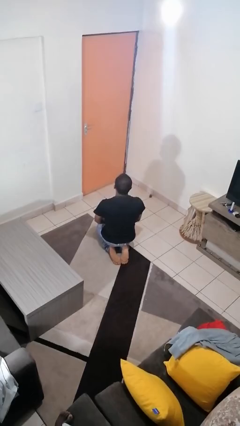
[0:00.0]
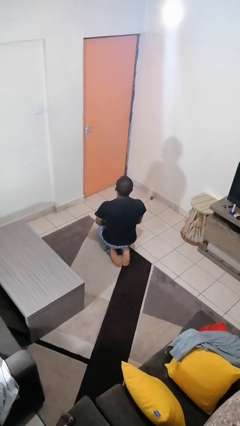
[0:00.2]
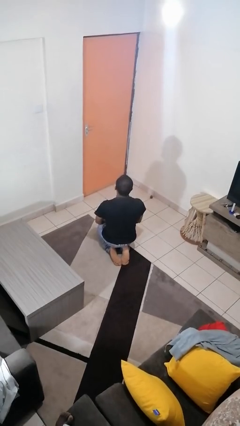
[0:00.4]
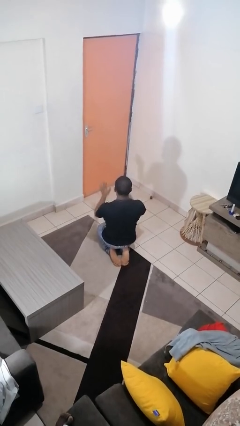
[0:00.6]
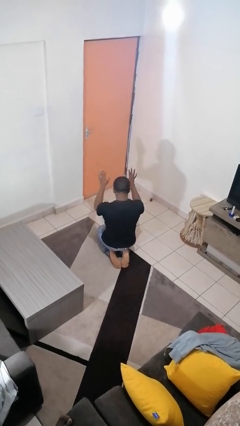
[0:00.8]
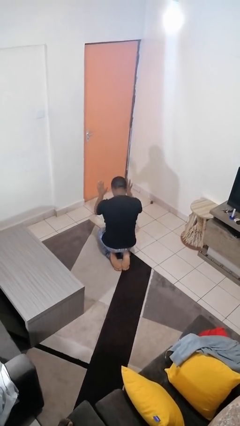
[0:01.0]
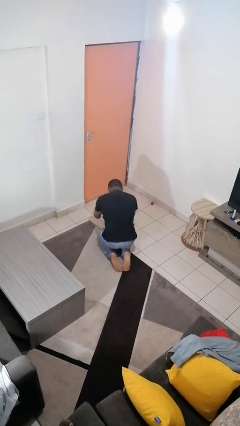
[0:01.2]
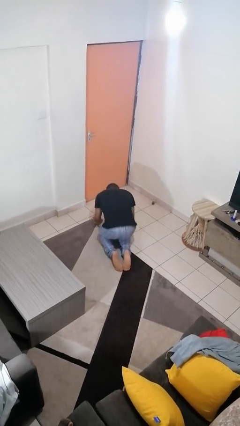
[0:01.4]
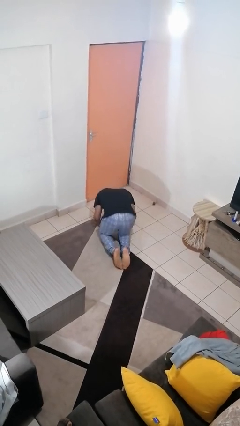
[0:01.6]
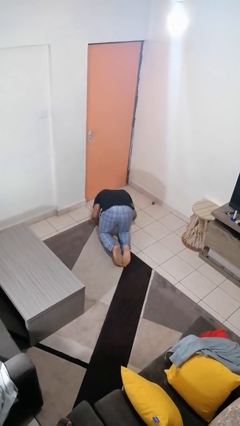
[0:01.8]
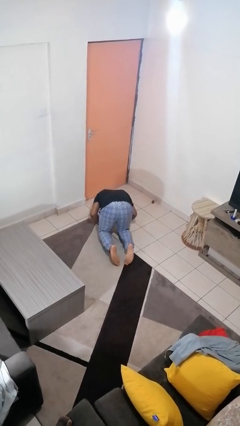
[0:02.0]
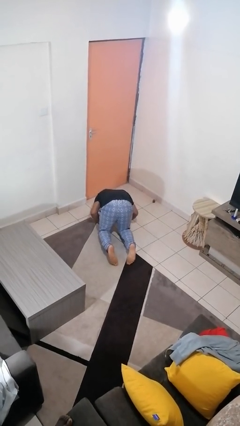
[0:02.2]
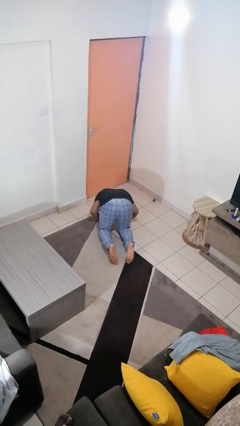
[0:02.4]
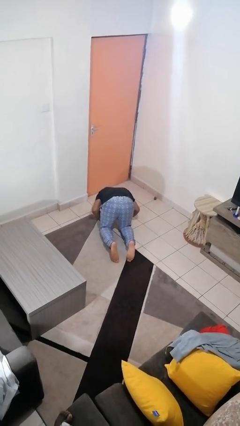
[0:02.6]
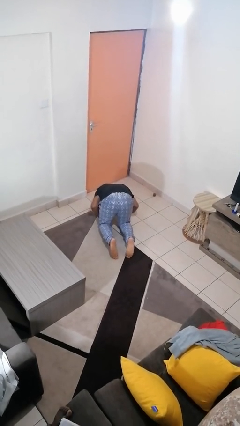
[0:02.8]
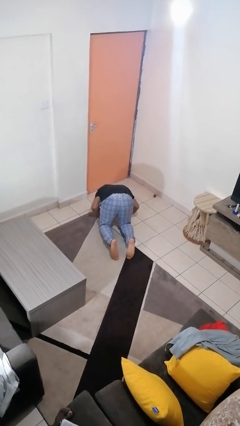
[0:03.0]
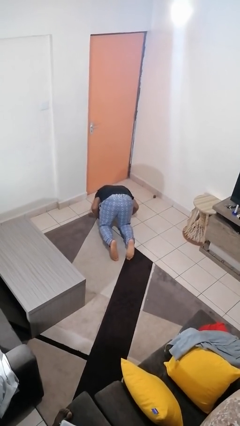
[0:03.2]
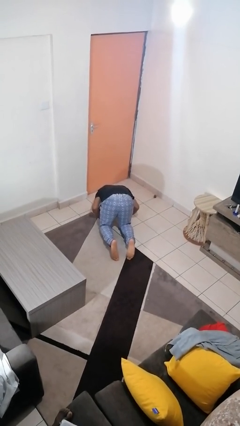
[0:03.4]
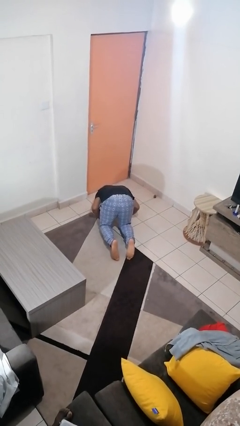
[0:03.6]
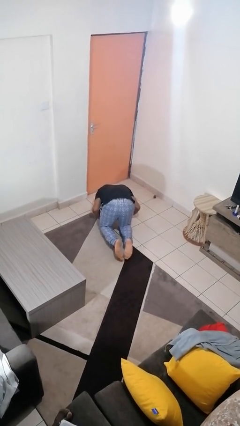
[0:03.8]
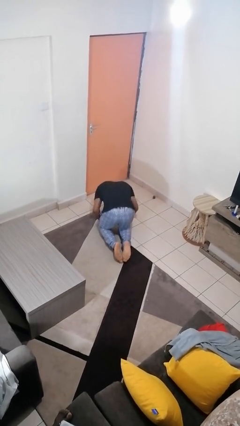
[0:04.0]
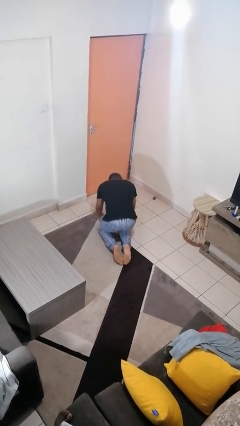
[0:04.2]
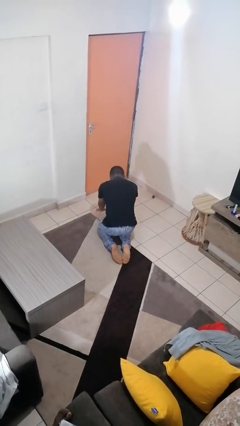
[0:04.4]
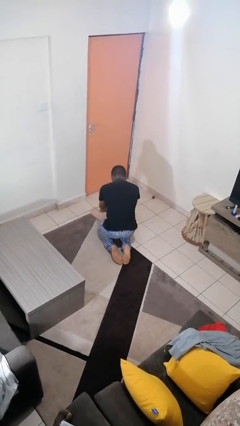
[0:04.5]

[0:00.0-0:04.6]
person prays

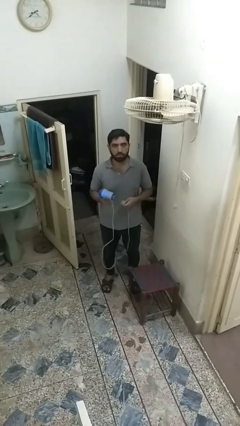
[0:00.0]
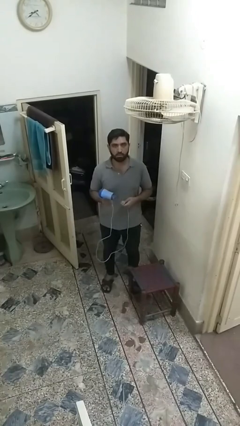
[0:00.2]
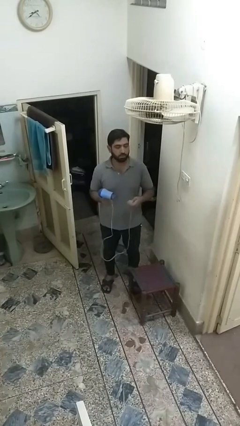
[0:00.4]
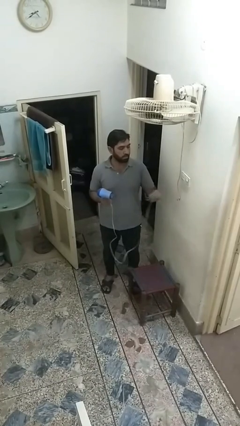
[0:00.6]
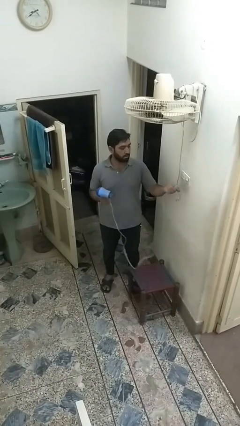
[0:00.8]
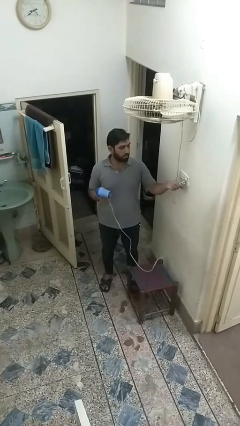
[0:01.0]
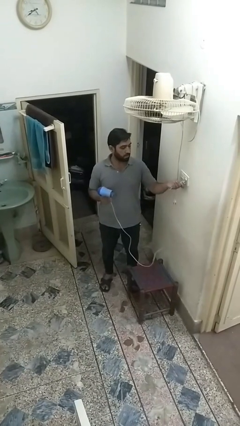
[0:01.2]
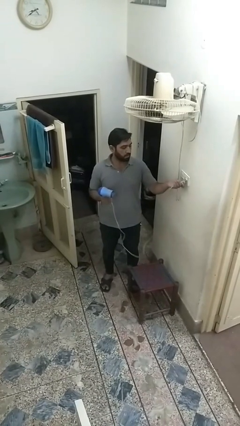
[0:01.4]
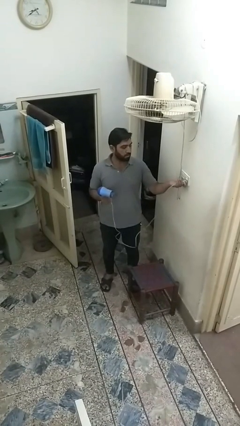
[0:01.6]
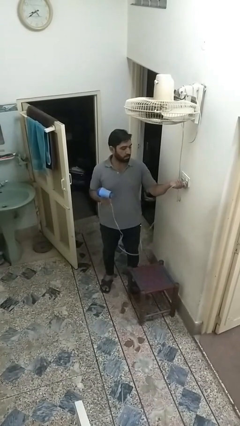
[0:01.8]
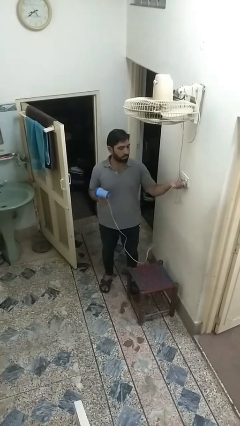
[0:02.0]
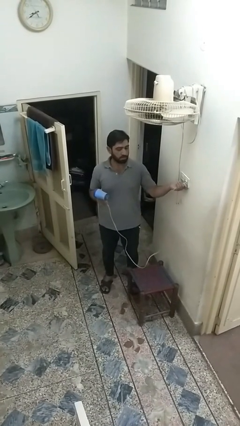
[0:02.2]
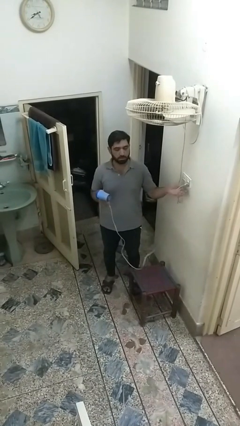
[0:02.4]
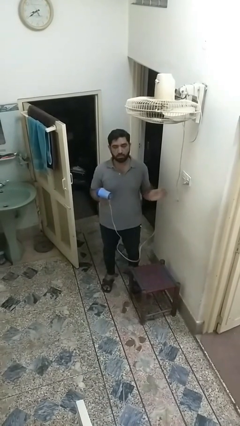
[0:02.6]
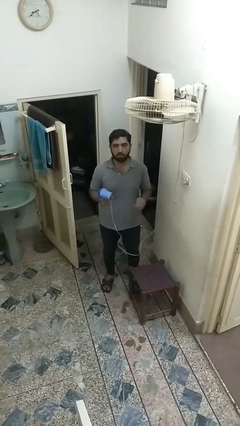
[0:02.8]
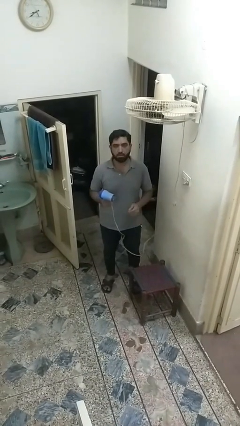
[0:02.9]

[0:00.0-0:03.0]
person plugs into electrical socket

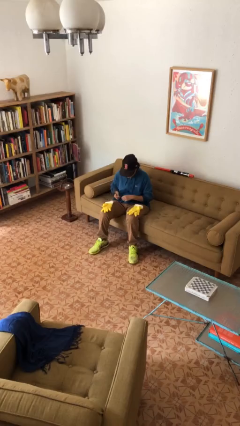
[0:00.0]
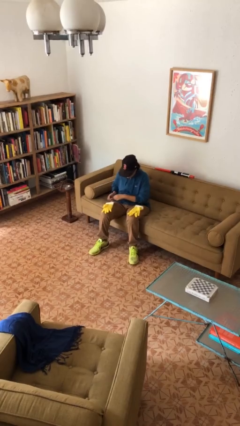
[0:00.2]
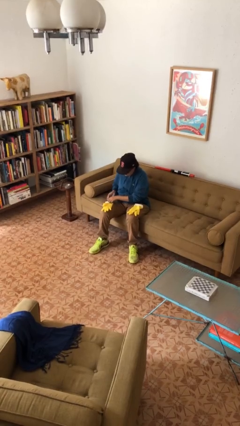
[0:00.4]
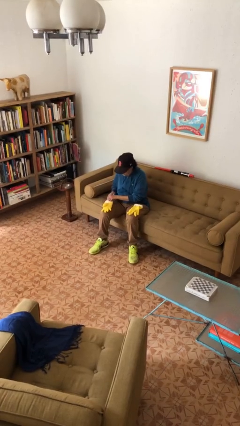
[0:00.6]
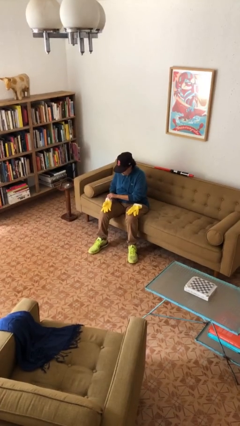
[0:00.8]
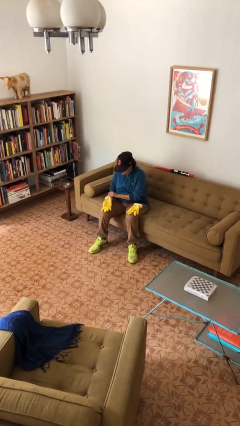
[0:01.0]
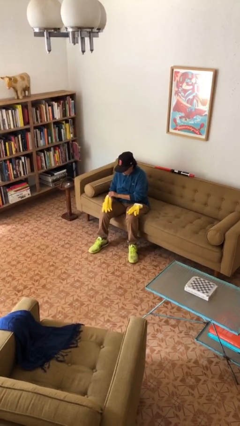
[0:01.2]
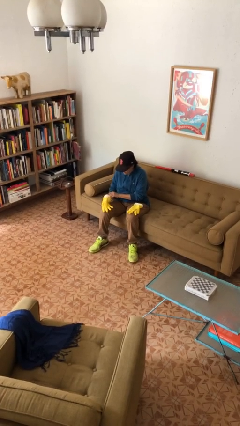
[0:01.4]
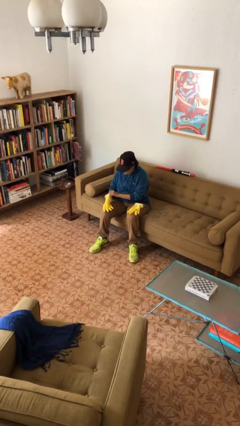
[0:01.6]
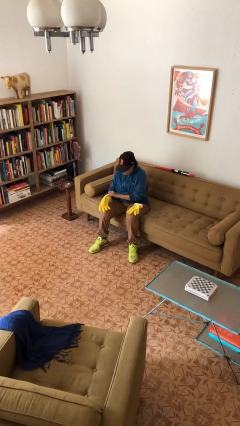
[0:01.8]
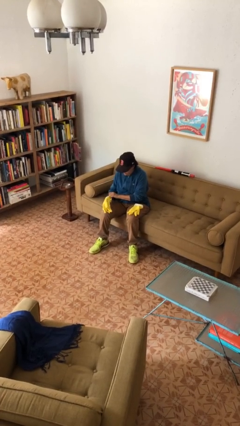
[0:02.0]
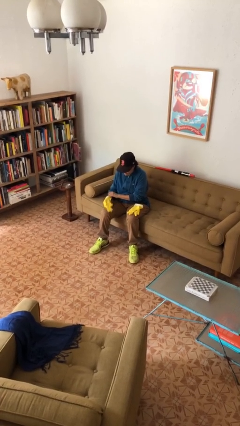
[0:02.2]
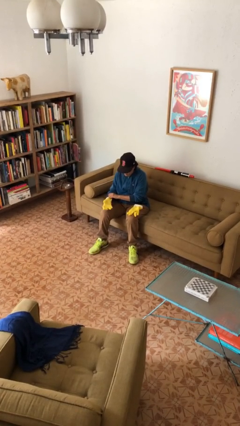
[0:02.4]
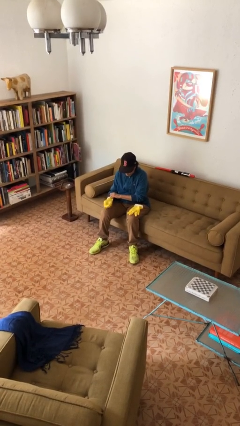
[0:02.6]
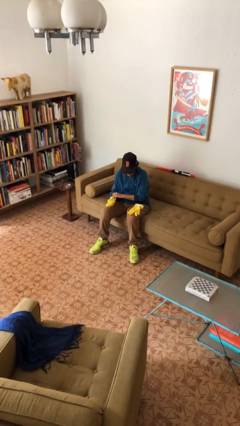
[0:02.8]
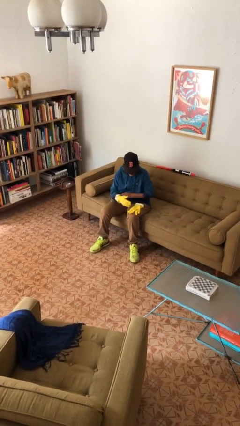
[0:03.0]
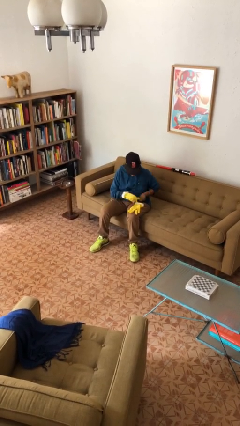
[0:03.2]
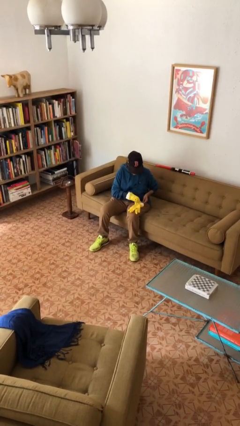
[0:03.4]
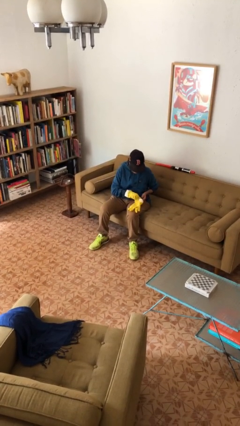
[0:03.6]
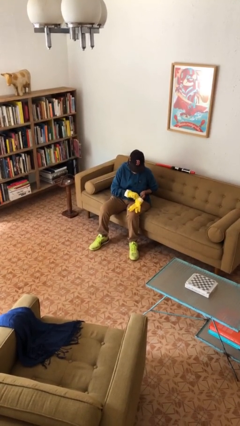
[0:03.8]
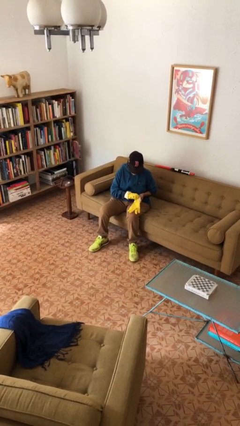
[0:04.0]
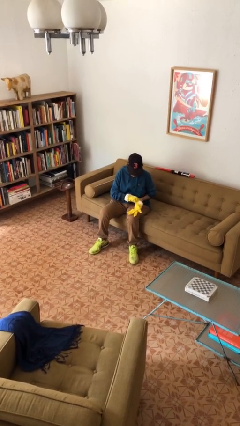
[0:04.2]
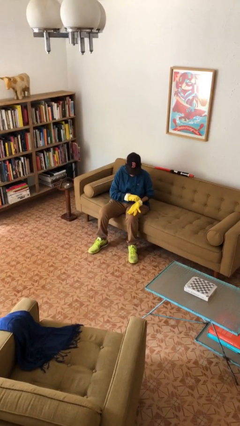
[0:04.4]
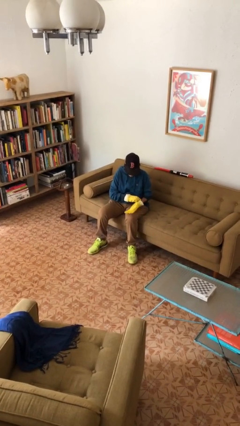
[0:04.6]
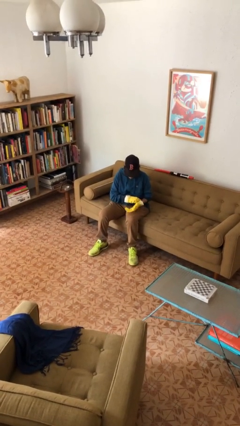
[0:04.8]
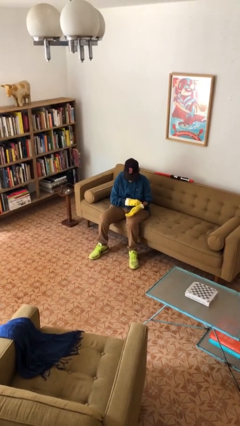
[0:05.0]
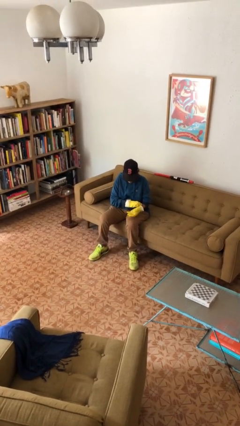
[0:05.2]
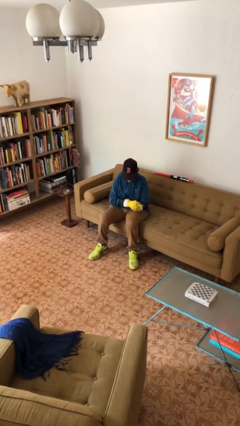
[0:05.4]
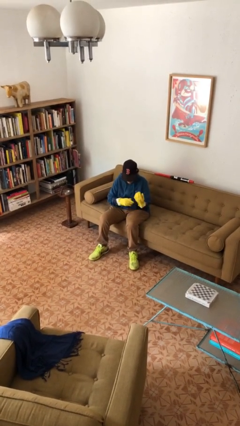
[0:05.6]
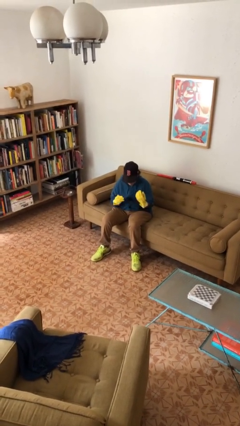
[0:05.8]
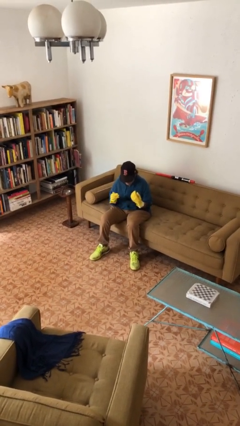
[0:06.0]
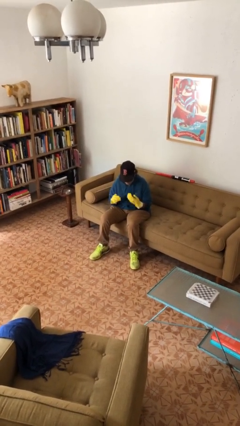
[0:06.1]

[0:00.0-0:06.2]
person puts on gloves

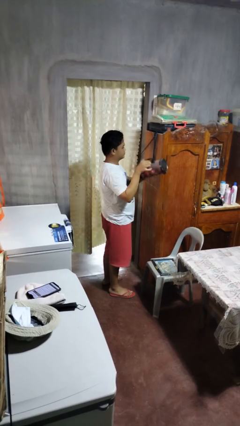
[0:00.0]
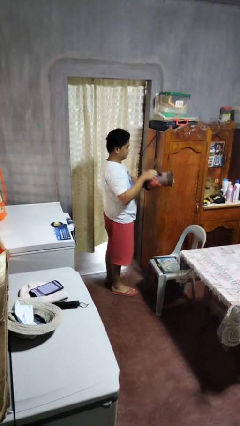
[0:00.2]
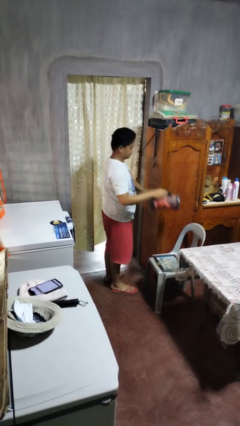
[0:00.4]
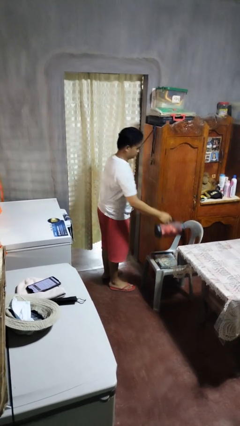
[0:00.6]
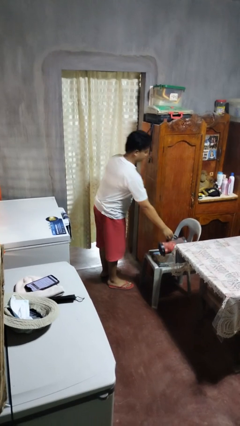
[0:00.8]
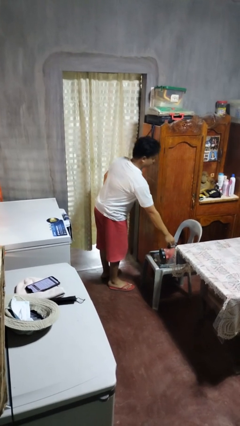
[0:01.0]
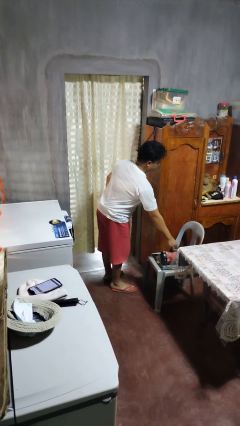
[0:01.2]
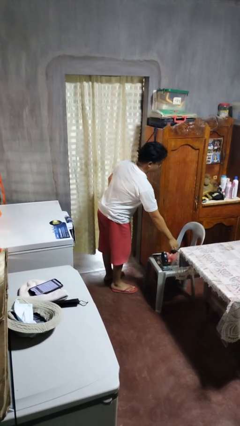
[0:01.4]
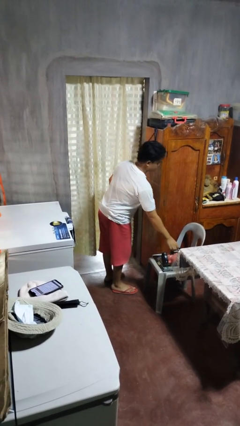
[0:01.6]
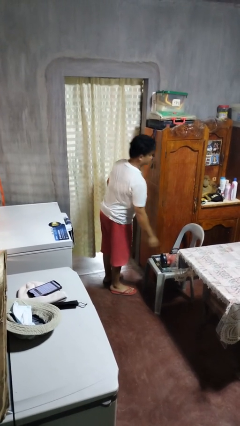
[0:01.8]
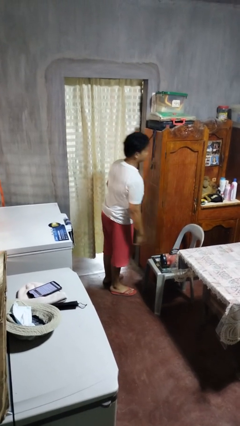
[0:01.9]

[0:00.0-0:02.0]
person puts down object on shelf

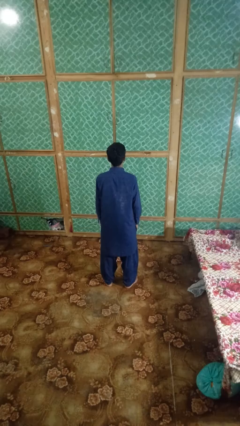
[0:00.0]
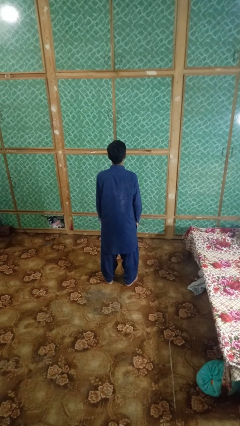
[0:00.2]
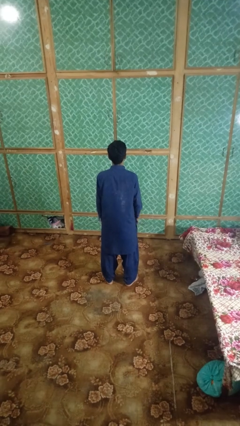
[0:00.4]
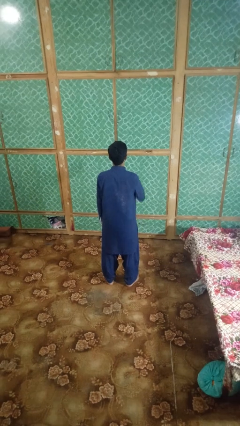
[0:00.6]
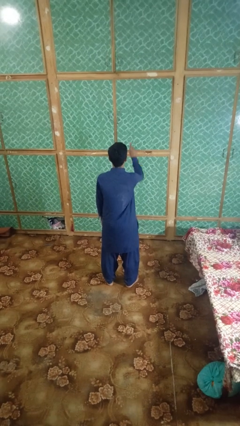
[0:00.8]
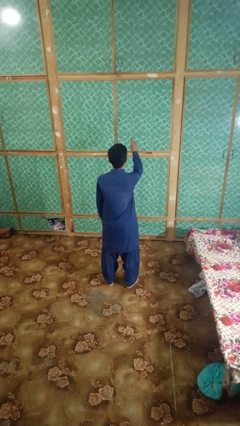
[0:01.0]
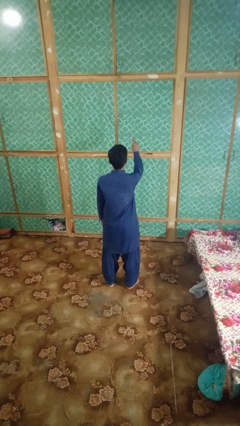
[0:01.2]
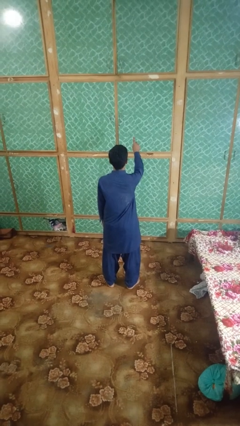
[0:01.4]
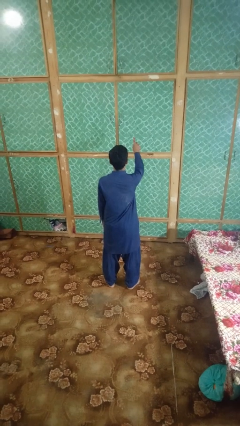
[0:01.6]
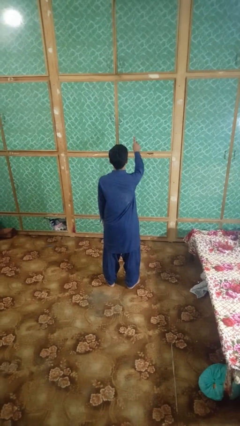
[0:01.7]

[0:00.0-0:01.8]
person gestures number one
